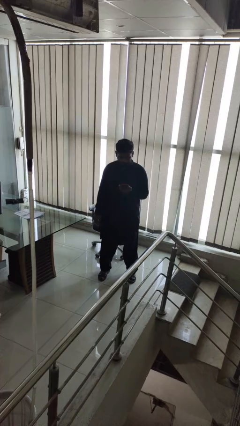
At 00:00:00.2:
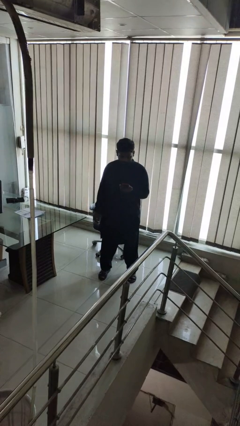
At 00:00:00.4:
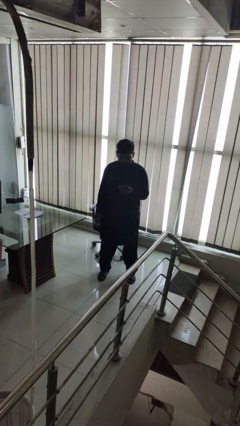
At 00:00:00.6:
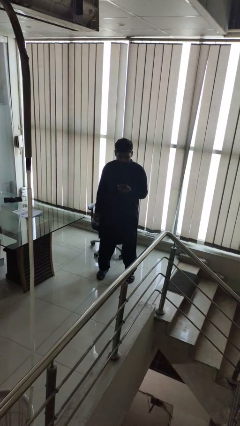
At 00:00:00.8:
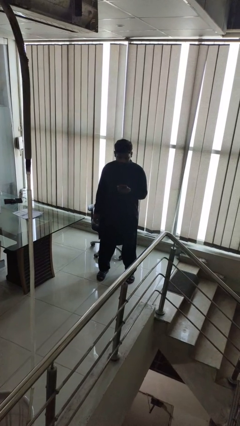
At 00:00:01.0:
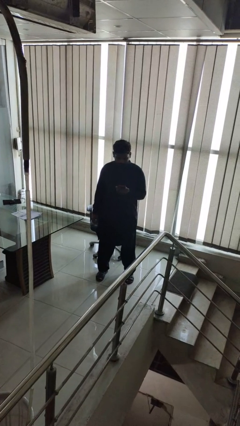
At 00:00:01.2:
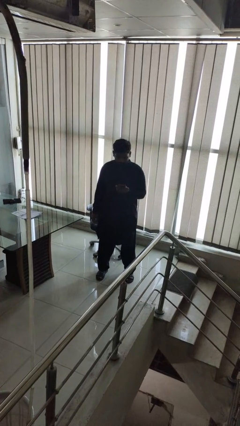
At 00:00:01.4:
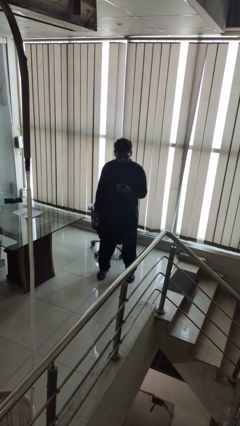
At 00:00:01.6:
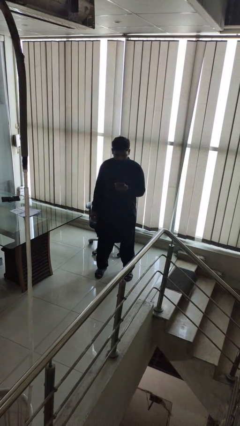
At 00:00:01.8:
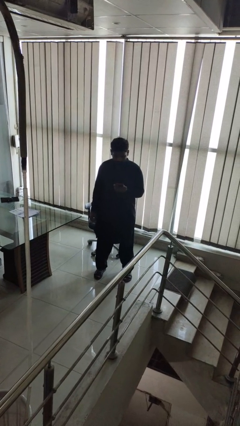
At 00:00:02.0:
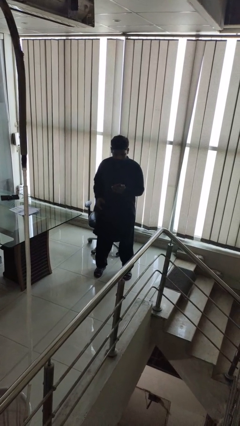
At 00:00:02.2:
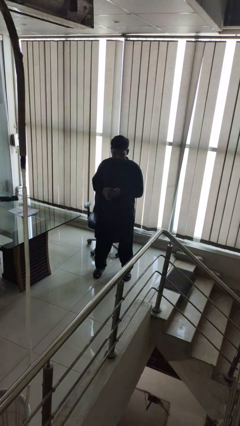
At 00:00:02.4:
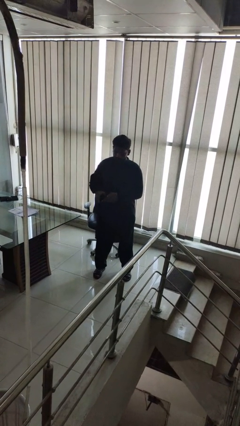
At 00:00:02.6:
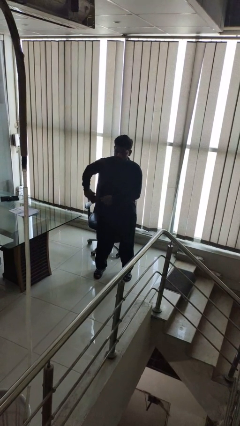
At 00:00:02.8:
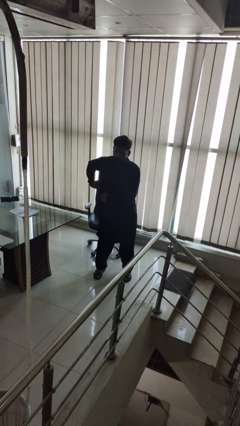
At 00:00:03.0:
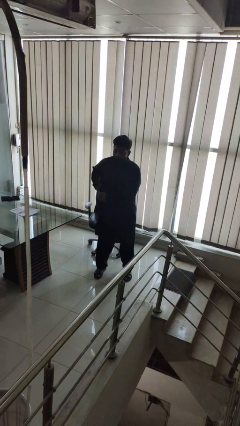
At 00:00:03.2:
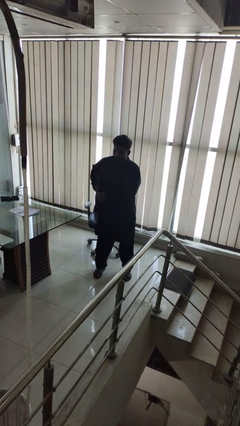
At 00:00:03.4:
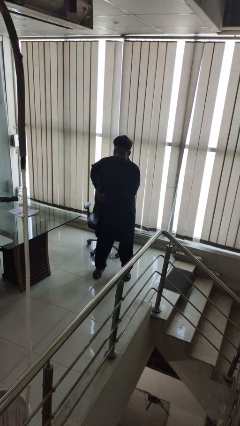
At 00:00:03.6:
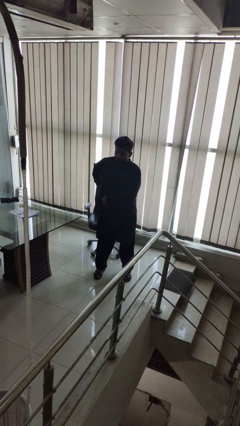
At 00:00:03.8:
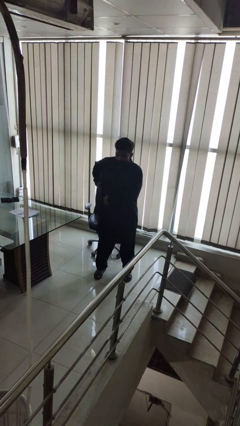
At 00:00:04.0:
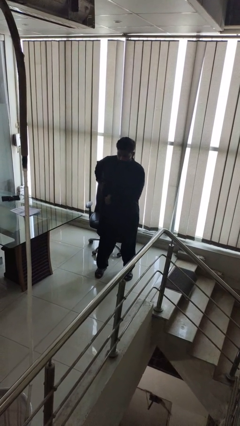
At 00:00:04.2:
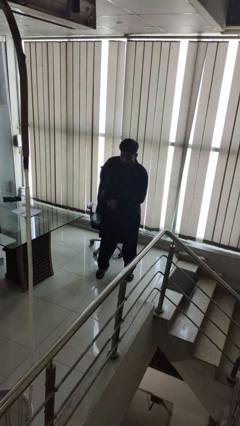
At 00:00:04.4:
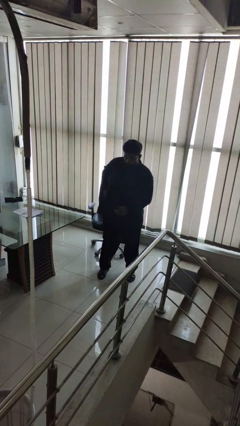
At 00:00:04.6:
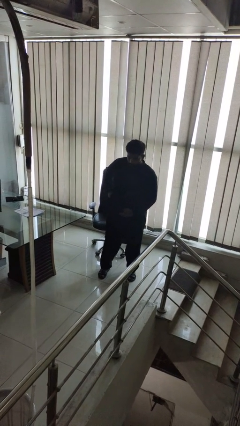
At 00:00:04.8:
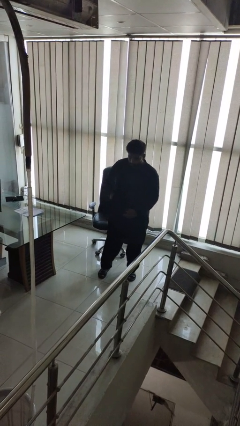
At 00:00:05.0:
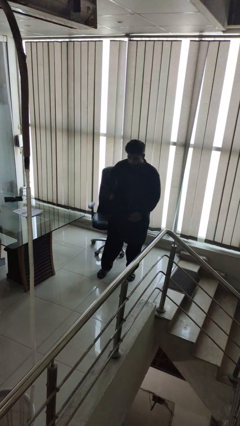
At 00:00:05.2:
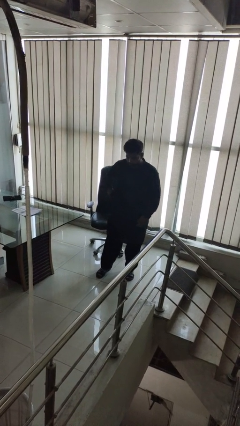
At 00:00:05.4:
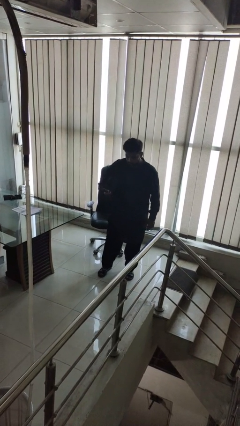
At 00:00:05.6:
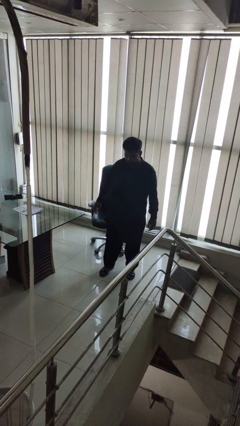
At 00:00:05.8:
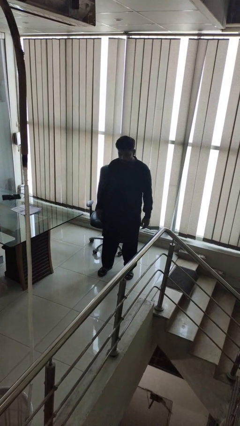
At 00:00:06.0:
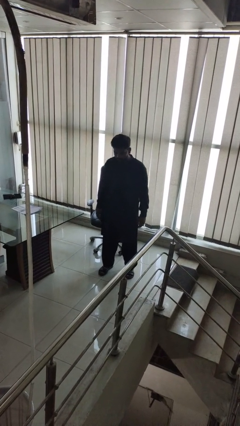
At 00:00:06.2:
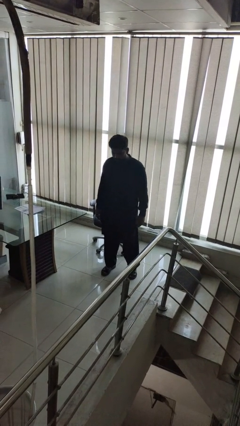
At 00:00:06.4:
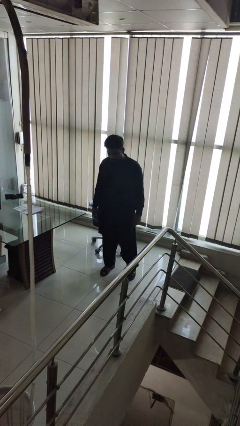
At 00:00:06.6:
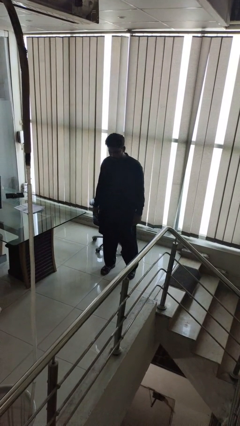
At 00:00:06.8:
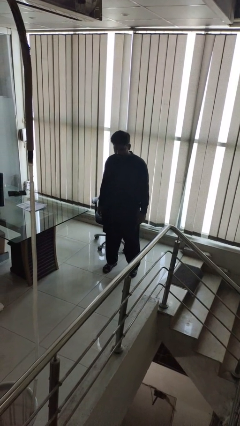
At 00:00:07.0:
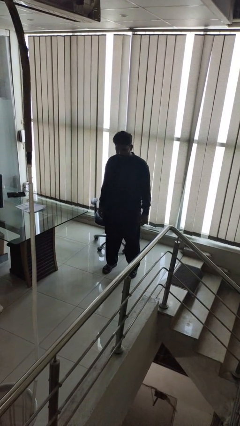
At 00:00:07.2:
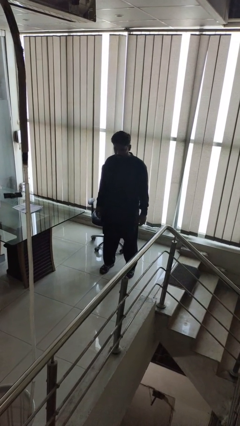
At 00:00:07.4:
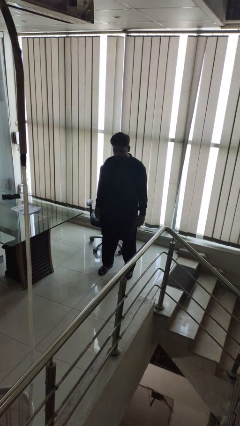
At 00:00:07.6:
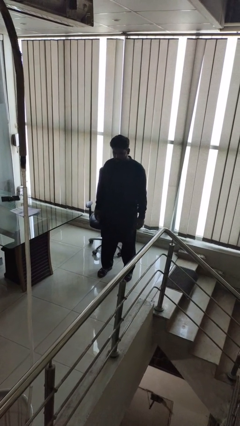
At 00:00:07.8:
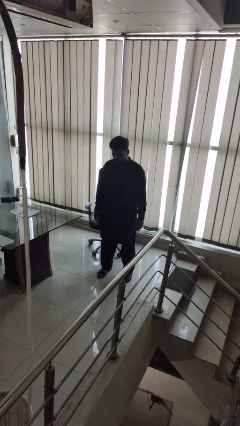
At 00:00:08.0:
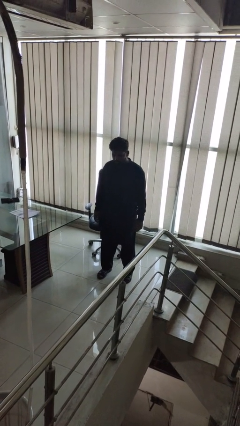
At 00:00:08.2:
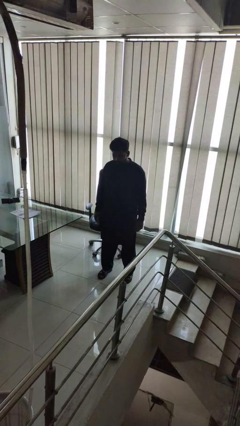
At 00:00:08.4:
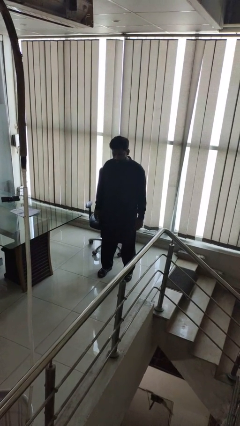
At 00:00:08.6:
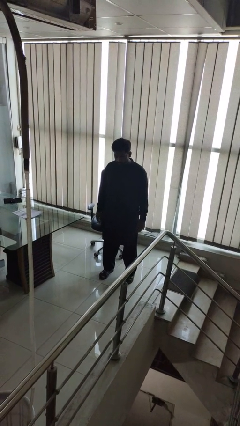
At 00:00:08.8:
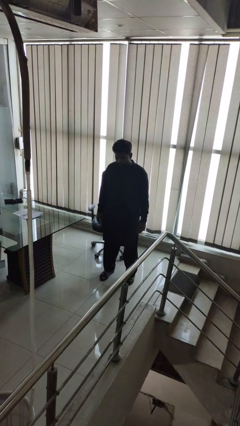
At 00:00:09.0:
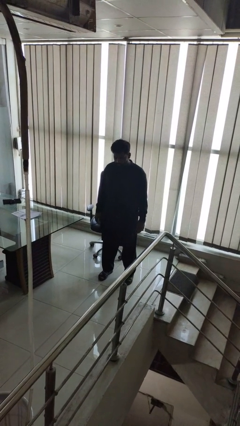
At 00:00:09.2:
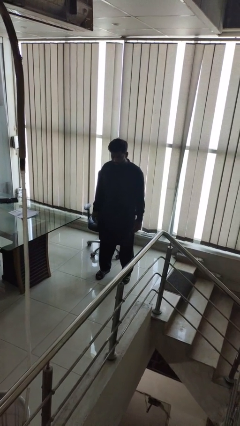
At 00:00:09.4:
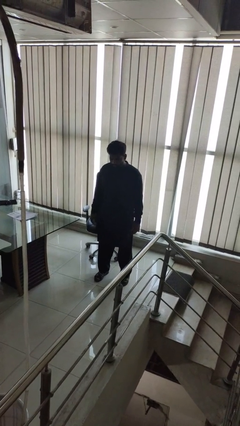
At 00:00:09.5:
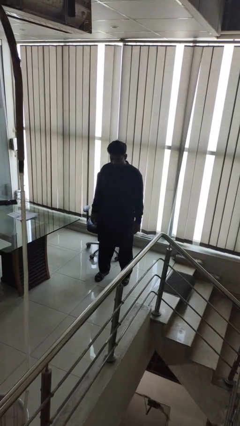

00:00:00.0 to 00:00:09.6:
person puts phone into pocket

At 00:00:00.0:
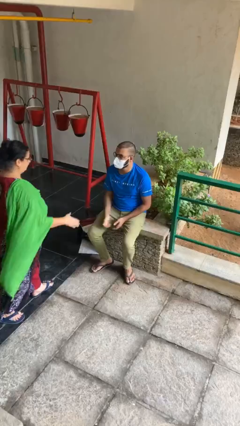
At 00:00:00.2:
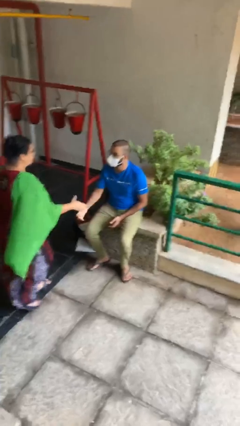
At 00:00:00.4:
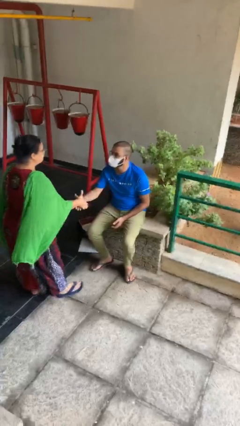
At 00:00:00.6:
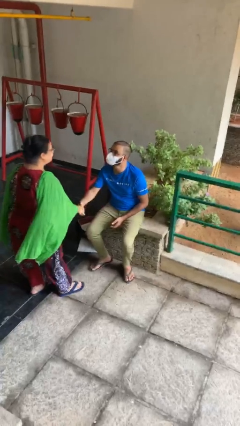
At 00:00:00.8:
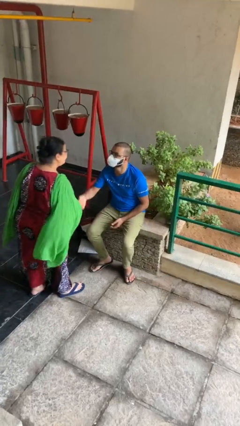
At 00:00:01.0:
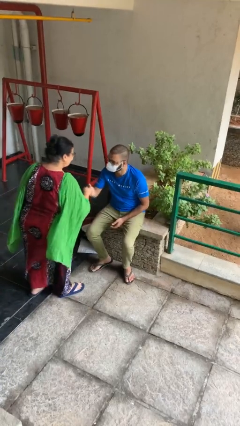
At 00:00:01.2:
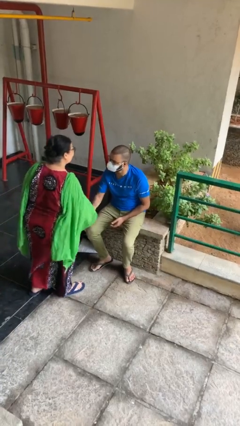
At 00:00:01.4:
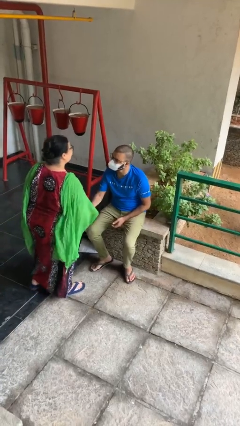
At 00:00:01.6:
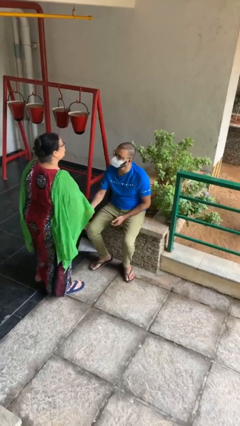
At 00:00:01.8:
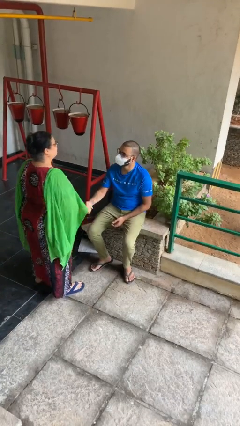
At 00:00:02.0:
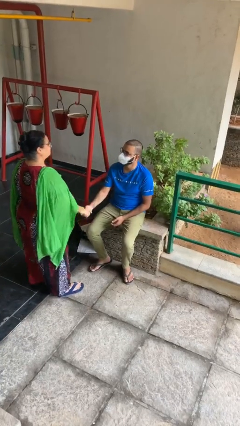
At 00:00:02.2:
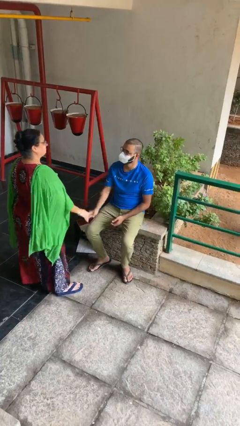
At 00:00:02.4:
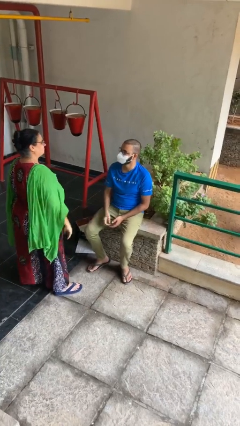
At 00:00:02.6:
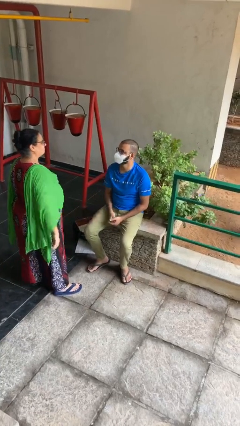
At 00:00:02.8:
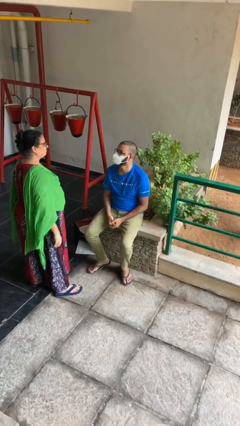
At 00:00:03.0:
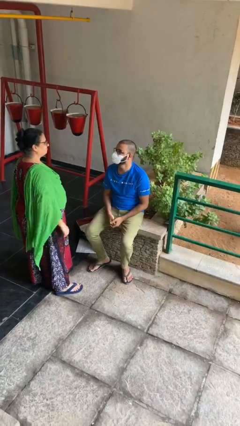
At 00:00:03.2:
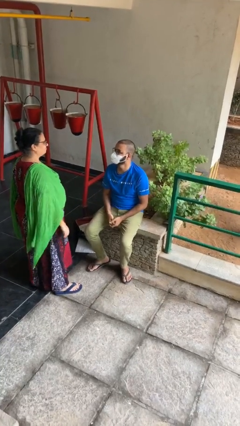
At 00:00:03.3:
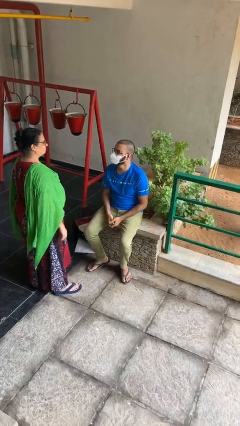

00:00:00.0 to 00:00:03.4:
person shakes hand

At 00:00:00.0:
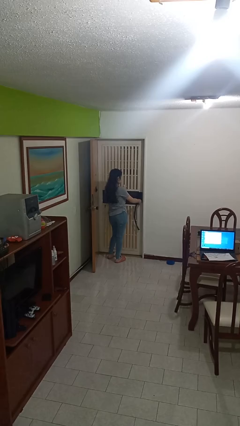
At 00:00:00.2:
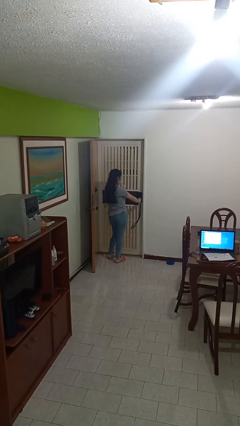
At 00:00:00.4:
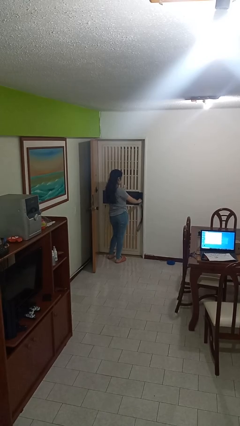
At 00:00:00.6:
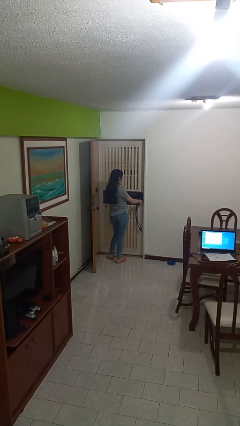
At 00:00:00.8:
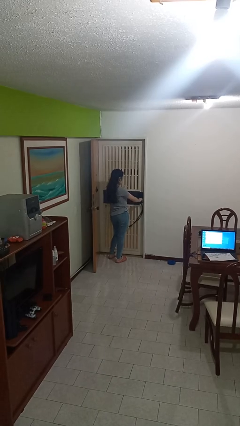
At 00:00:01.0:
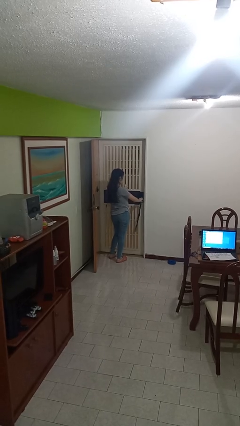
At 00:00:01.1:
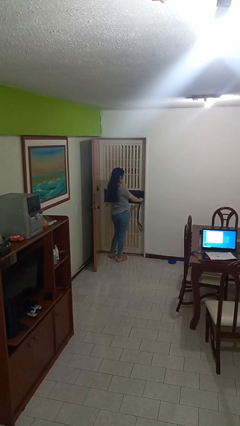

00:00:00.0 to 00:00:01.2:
person unlocks door with keys

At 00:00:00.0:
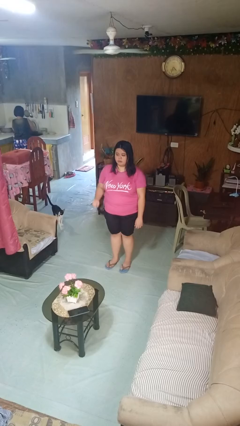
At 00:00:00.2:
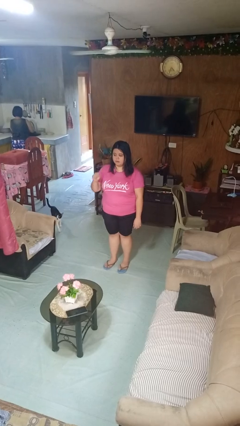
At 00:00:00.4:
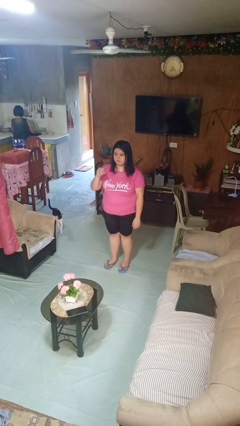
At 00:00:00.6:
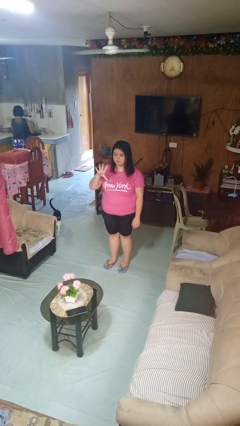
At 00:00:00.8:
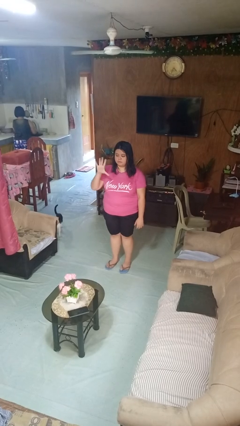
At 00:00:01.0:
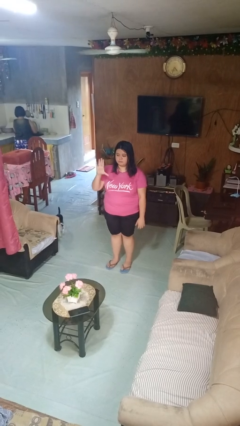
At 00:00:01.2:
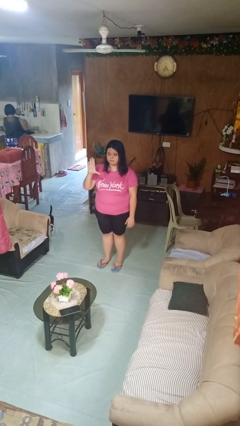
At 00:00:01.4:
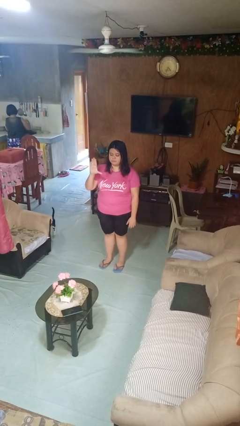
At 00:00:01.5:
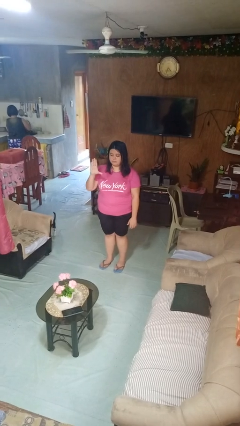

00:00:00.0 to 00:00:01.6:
person gestures zoom in

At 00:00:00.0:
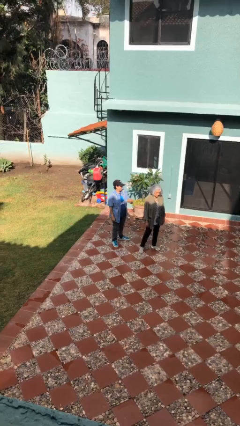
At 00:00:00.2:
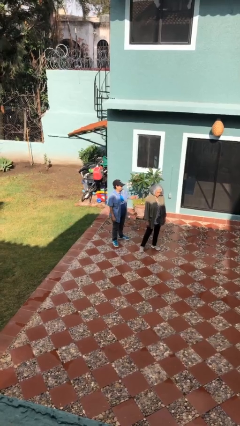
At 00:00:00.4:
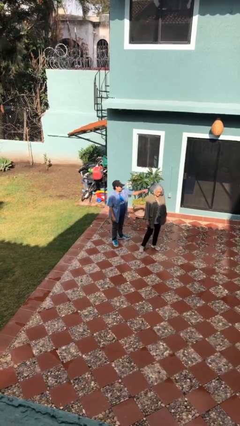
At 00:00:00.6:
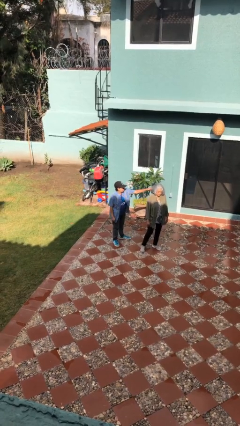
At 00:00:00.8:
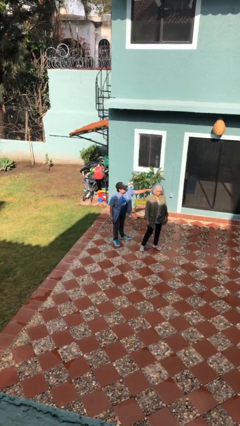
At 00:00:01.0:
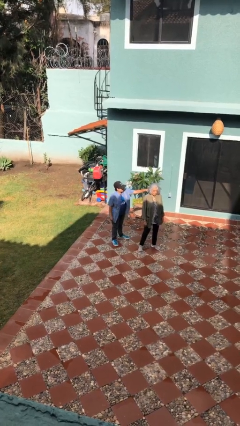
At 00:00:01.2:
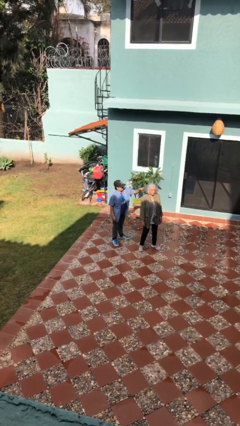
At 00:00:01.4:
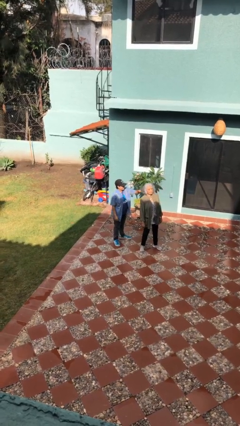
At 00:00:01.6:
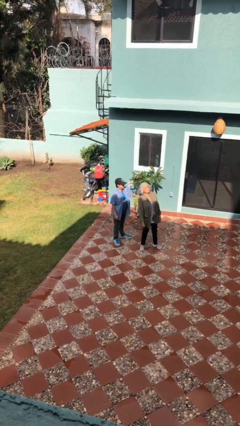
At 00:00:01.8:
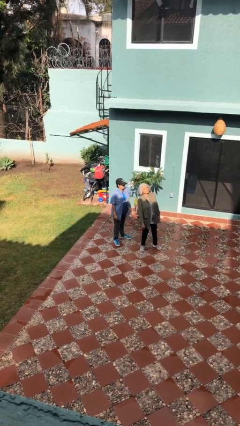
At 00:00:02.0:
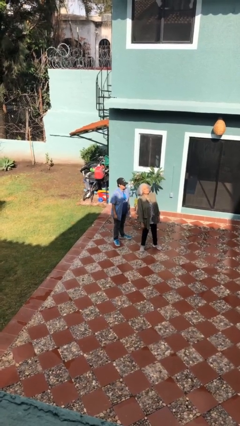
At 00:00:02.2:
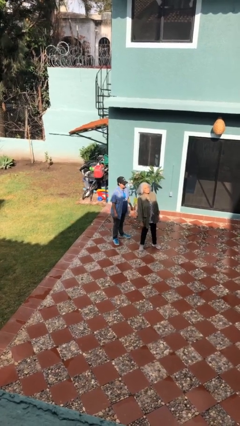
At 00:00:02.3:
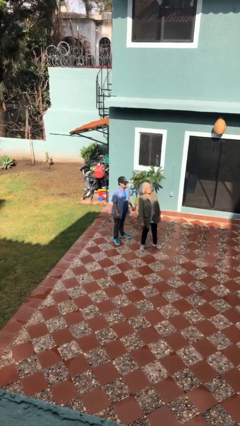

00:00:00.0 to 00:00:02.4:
person grabs person by hair
